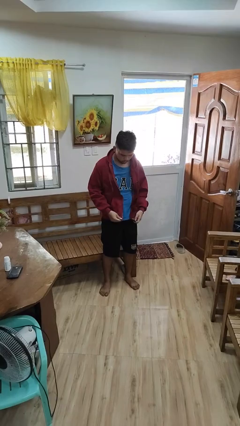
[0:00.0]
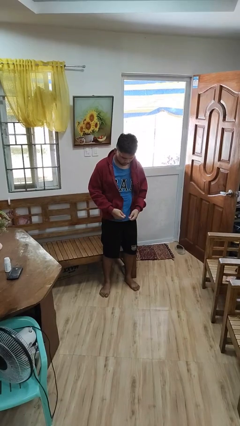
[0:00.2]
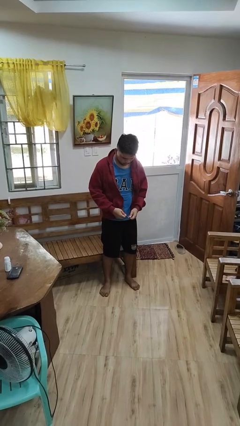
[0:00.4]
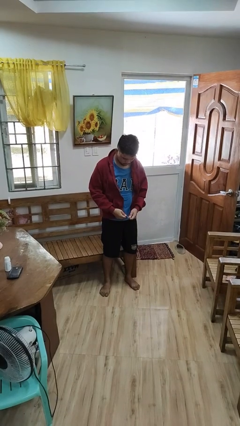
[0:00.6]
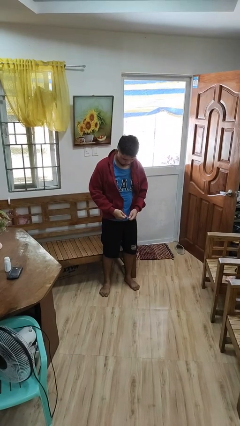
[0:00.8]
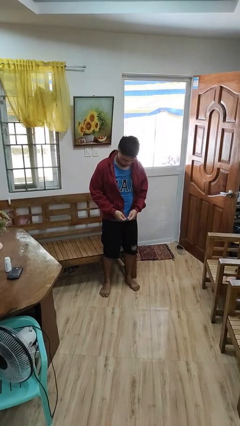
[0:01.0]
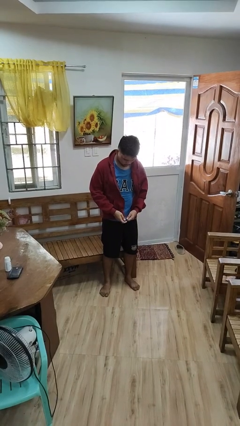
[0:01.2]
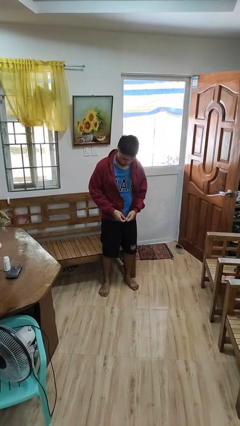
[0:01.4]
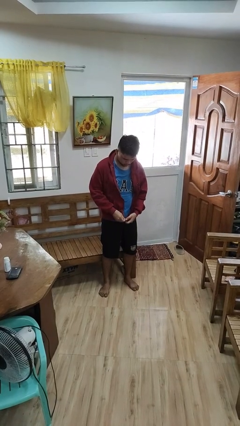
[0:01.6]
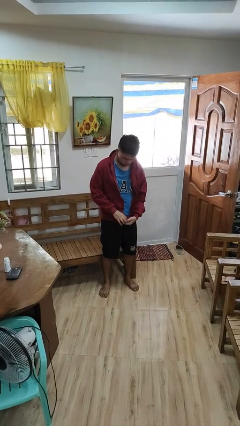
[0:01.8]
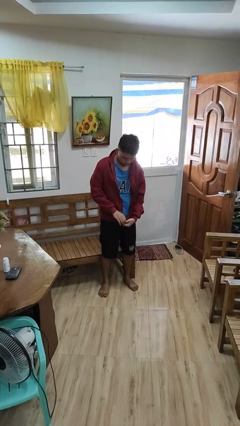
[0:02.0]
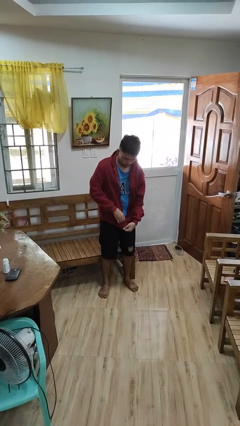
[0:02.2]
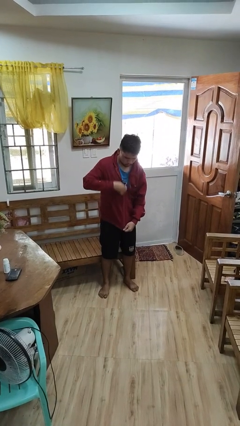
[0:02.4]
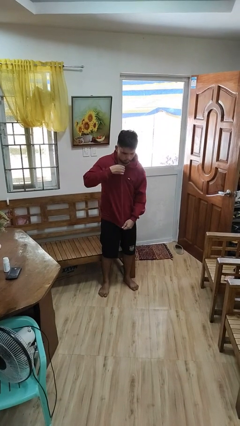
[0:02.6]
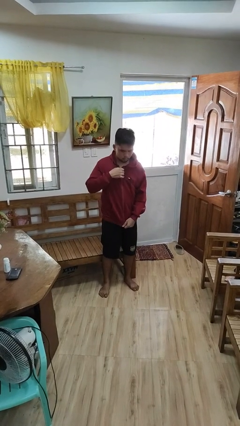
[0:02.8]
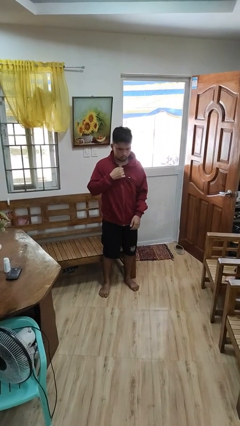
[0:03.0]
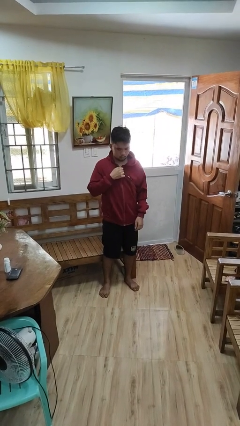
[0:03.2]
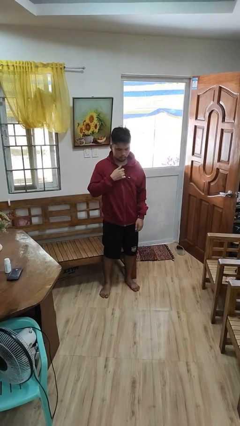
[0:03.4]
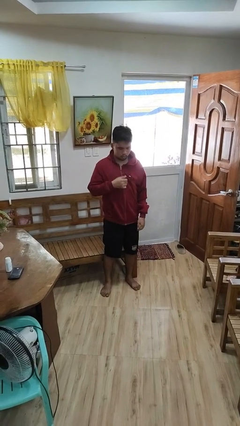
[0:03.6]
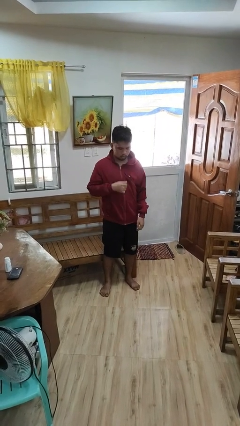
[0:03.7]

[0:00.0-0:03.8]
person zips up jacket

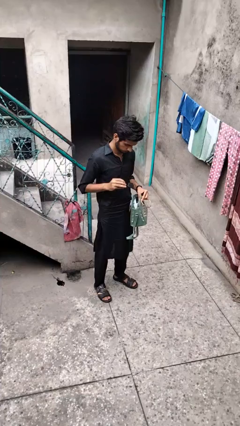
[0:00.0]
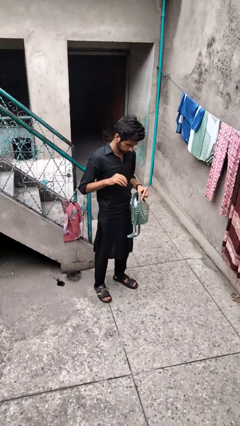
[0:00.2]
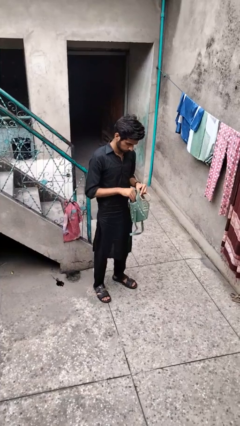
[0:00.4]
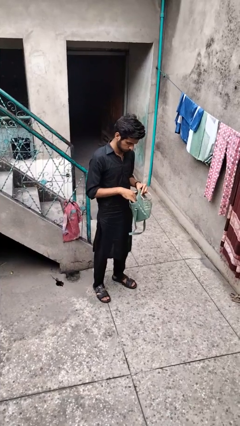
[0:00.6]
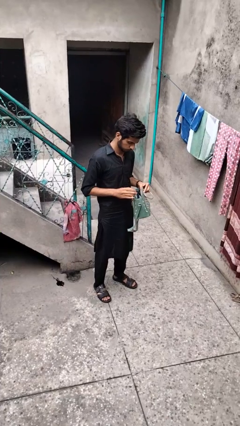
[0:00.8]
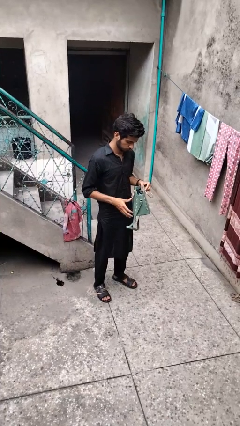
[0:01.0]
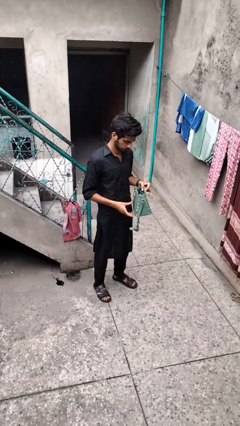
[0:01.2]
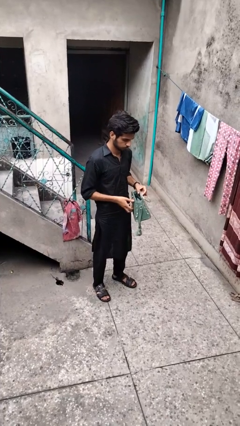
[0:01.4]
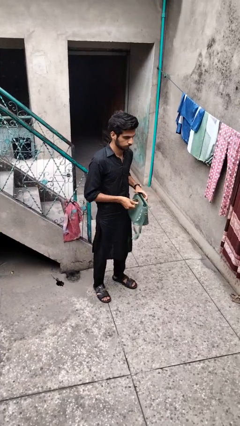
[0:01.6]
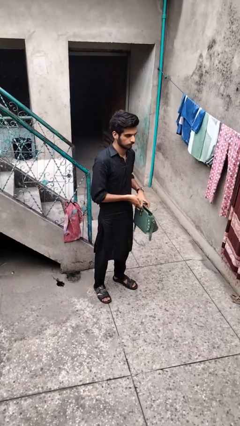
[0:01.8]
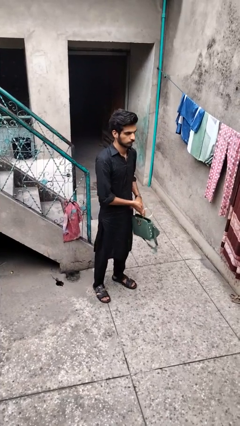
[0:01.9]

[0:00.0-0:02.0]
person puts object into purse

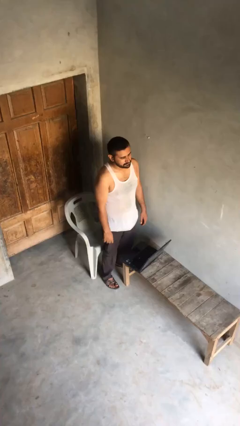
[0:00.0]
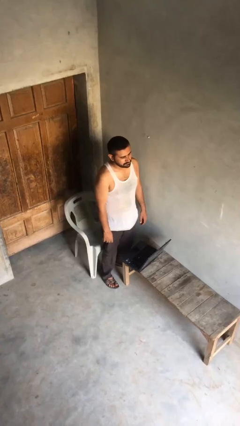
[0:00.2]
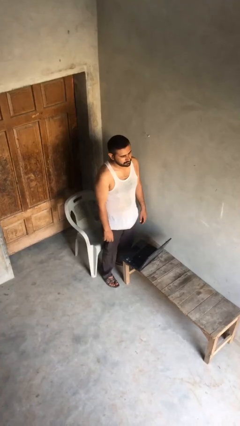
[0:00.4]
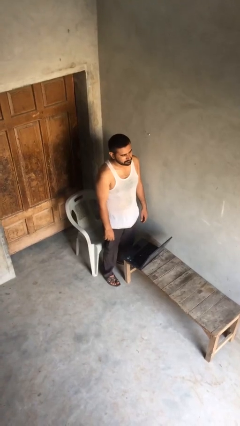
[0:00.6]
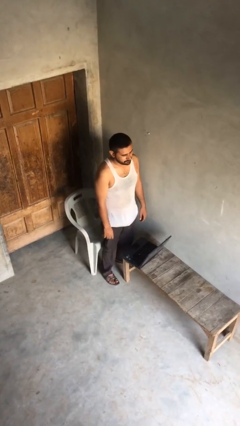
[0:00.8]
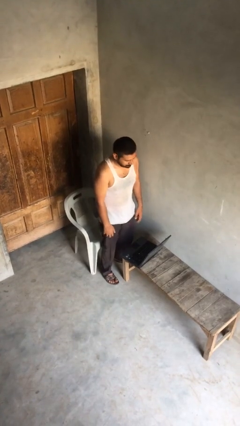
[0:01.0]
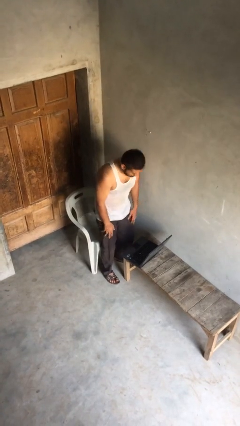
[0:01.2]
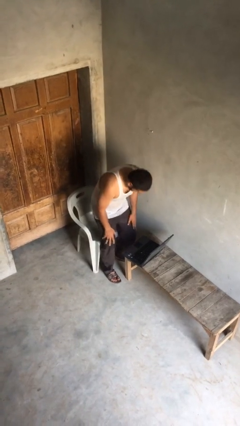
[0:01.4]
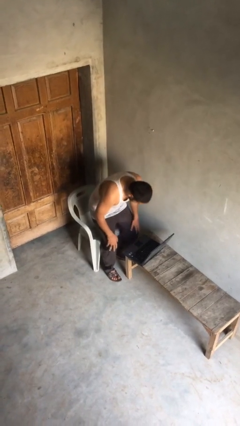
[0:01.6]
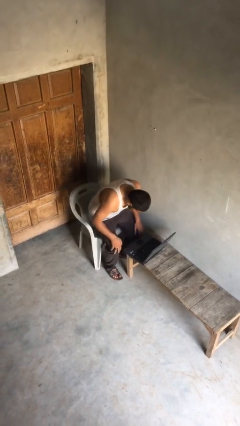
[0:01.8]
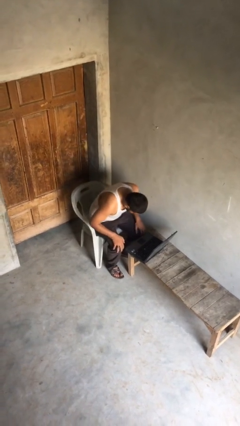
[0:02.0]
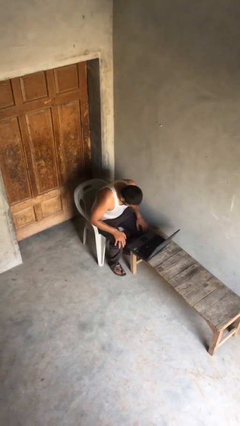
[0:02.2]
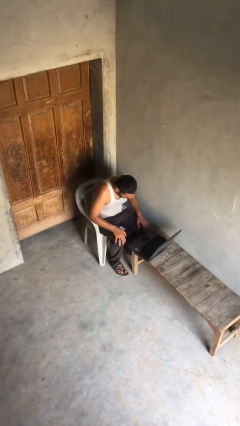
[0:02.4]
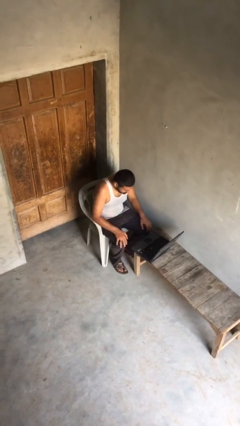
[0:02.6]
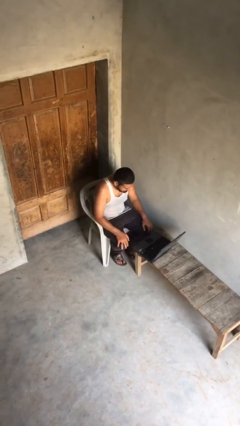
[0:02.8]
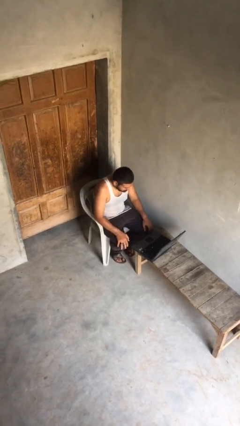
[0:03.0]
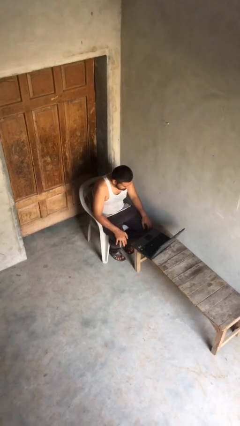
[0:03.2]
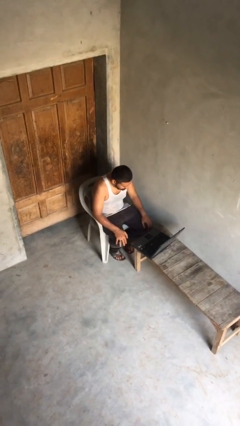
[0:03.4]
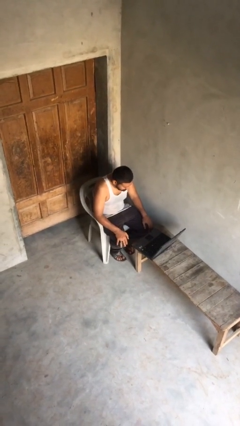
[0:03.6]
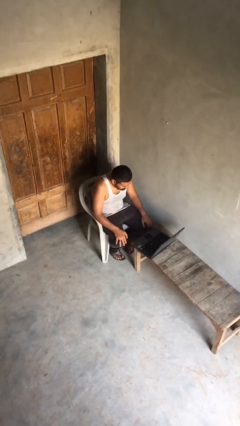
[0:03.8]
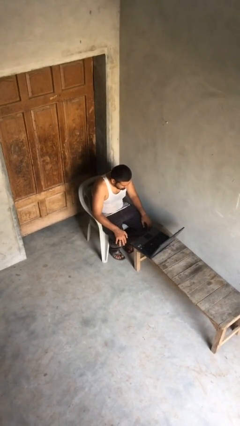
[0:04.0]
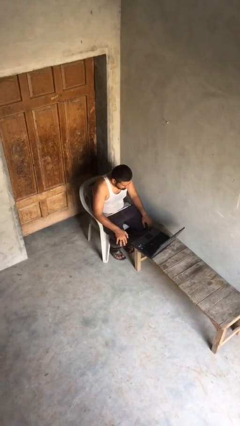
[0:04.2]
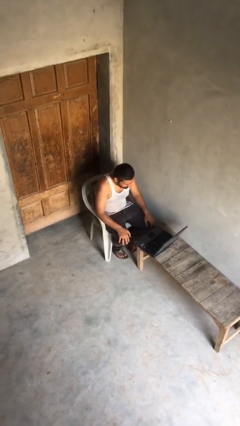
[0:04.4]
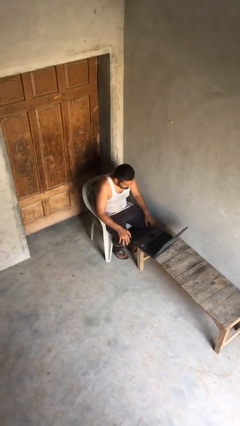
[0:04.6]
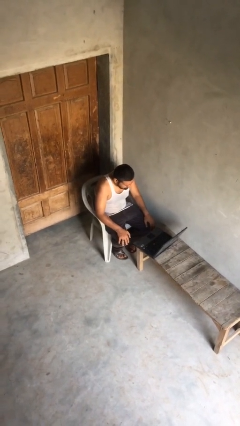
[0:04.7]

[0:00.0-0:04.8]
person sits down

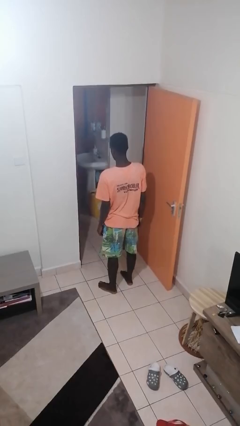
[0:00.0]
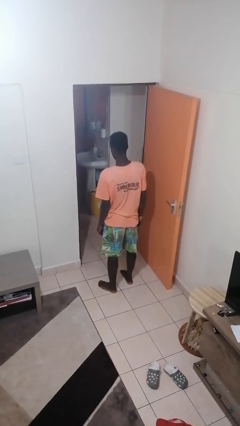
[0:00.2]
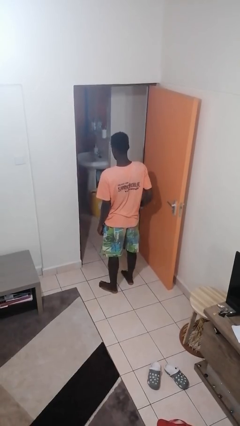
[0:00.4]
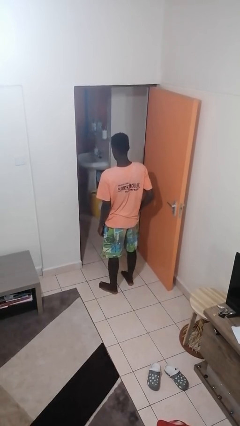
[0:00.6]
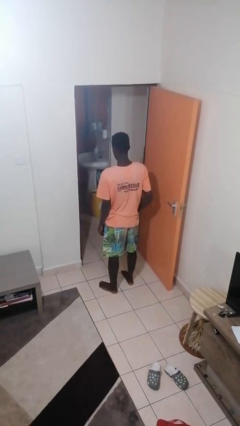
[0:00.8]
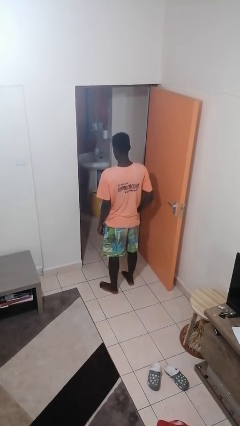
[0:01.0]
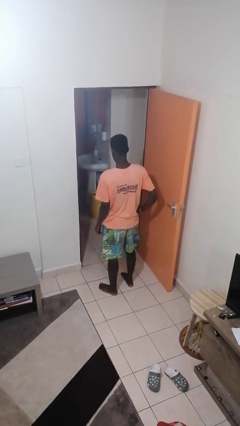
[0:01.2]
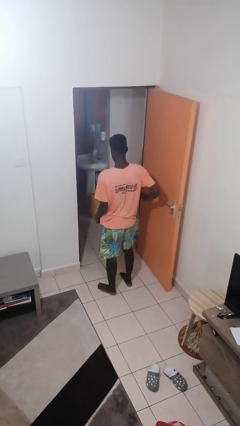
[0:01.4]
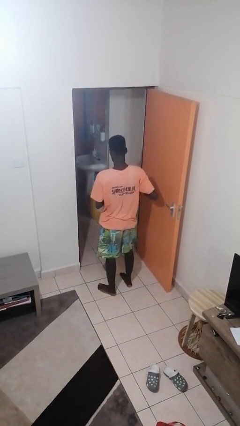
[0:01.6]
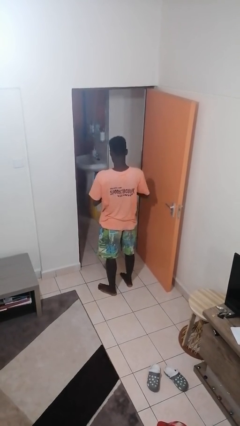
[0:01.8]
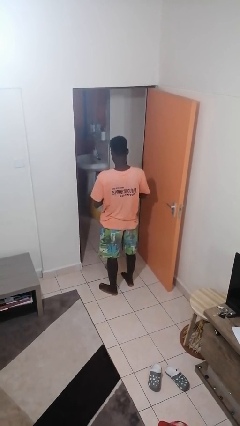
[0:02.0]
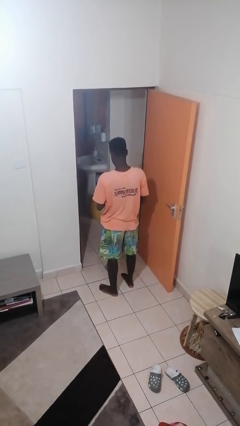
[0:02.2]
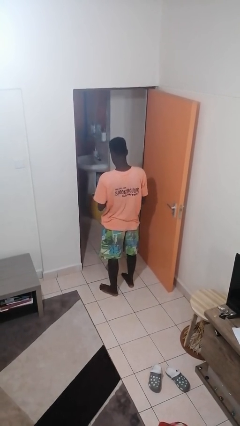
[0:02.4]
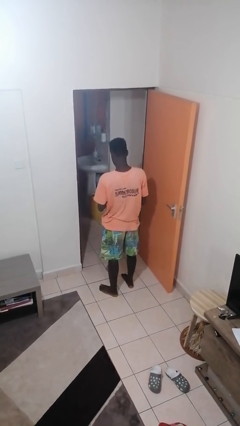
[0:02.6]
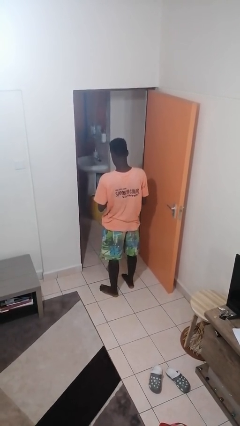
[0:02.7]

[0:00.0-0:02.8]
person takes phone from pocket

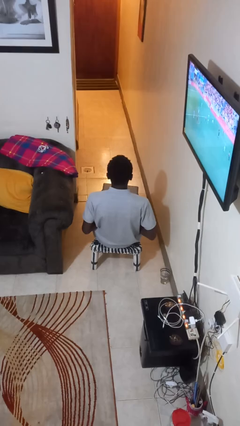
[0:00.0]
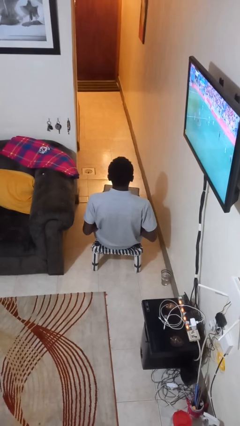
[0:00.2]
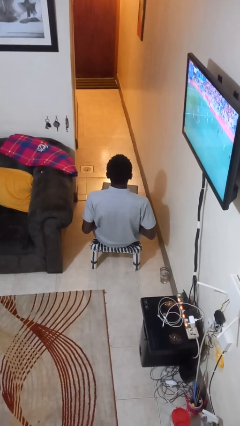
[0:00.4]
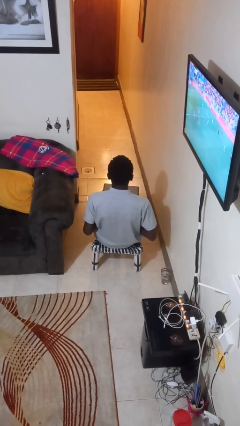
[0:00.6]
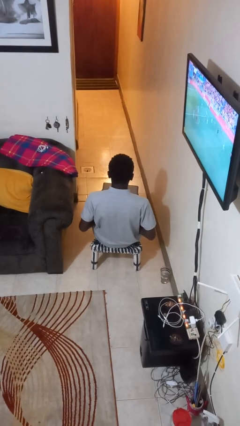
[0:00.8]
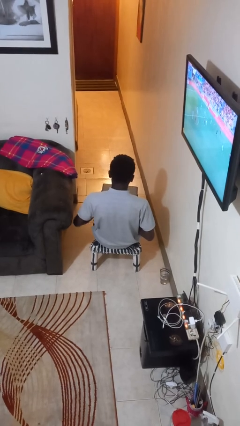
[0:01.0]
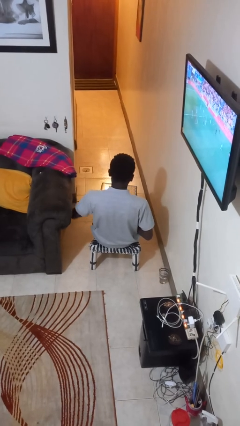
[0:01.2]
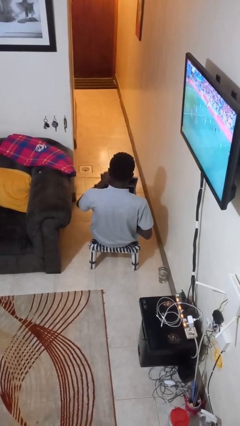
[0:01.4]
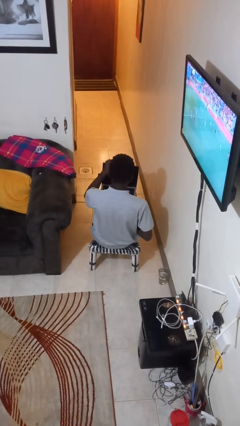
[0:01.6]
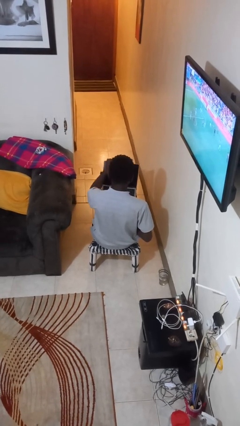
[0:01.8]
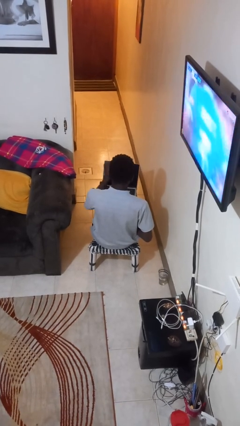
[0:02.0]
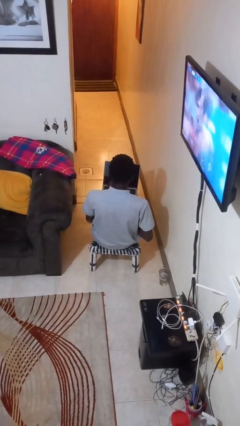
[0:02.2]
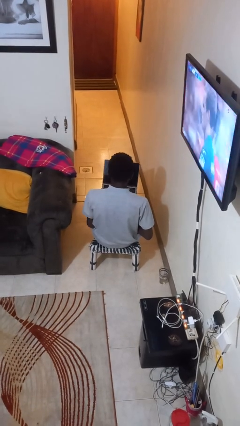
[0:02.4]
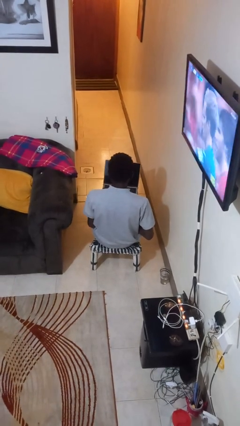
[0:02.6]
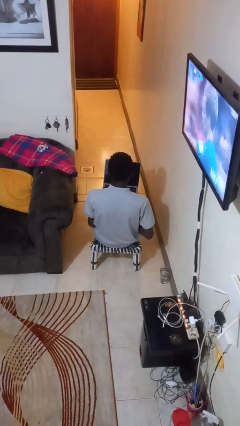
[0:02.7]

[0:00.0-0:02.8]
person opens laptop

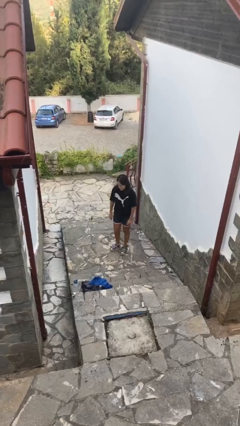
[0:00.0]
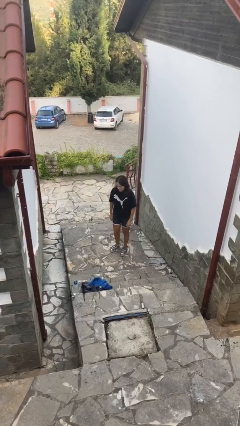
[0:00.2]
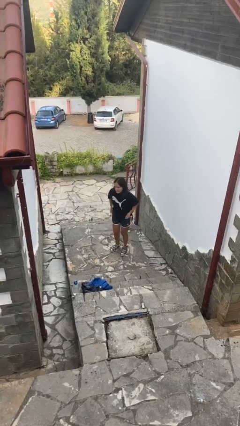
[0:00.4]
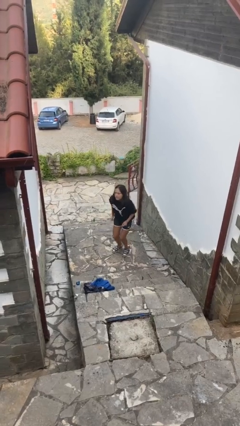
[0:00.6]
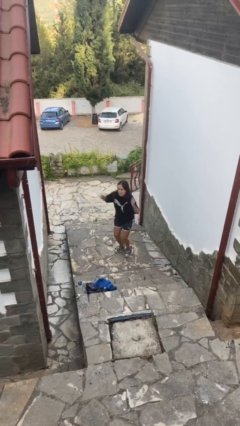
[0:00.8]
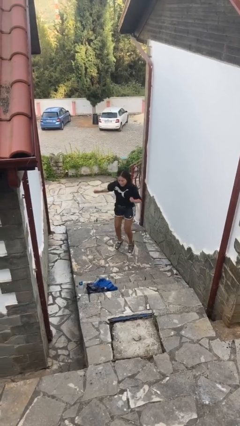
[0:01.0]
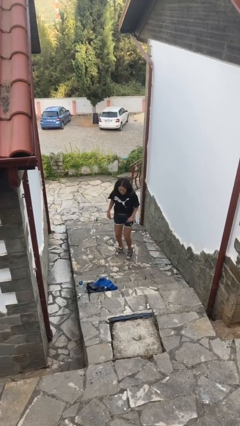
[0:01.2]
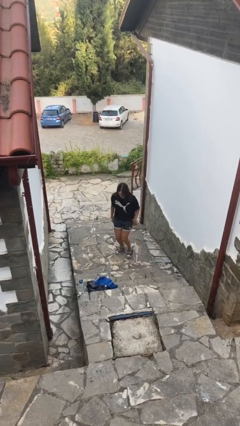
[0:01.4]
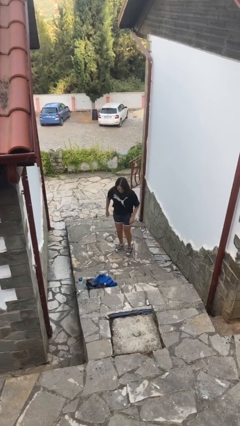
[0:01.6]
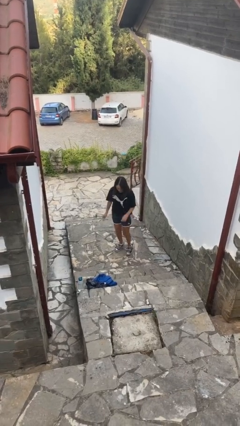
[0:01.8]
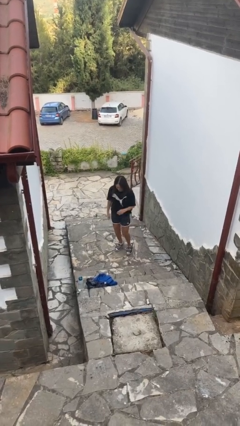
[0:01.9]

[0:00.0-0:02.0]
person jumps
